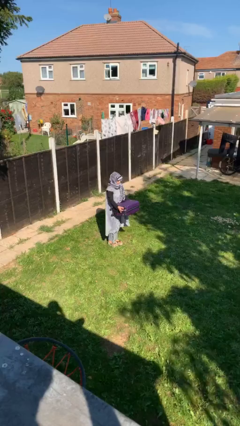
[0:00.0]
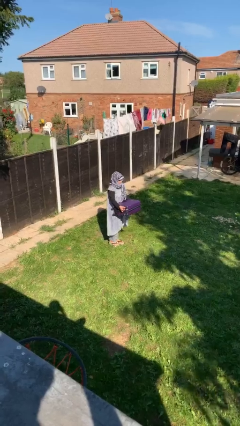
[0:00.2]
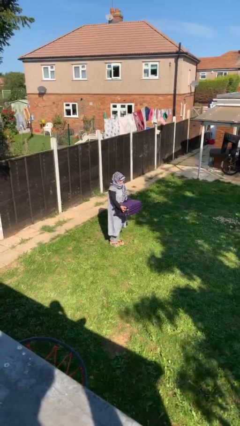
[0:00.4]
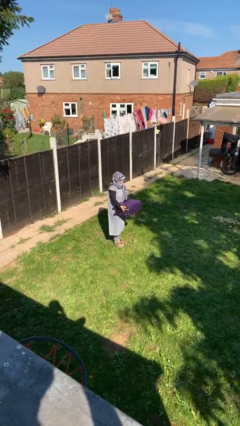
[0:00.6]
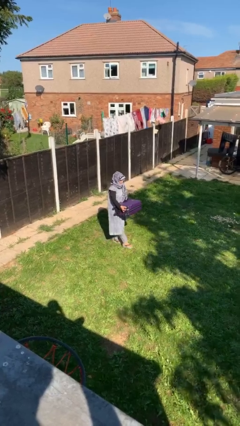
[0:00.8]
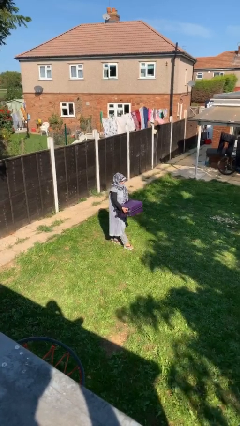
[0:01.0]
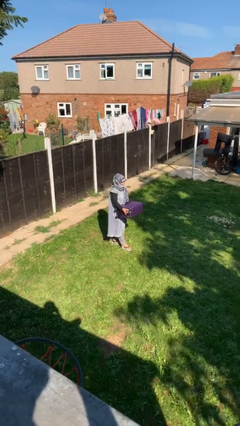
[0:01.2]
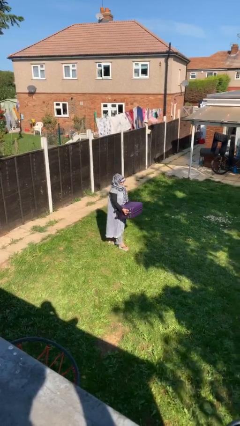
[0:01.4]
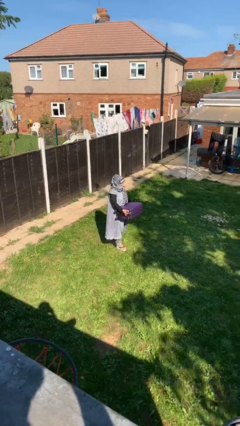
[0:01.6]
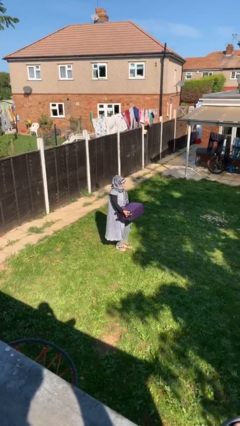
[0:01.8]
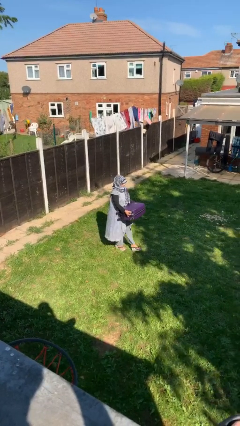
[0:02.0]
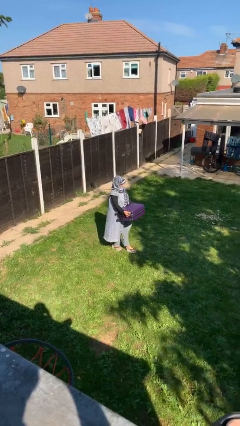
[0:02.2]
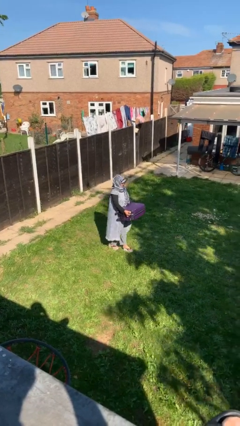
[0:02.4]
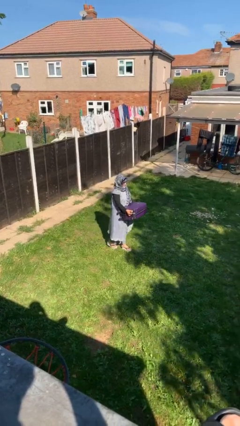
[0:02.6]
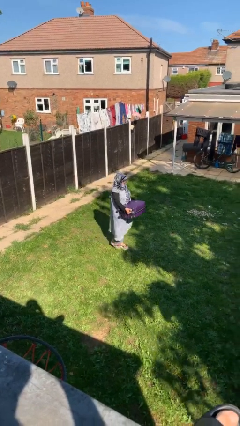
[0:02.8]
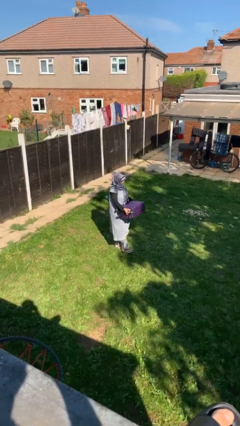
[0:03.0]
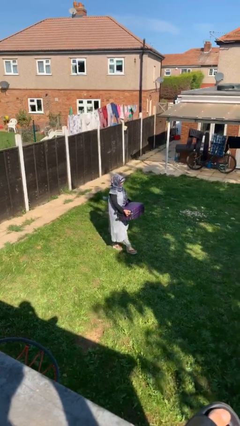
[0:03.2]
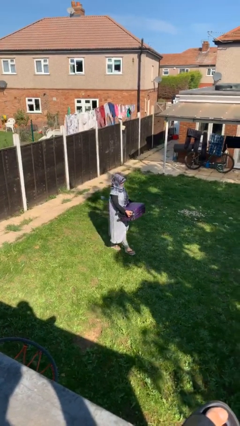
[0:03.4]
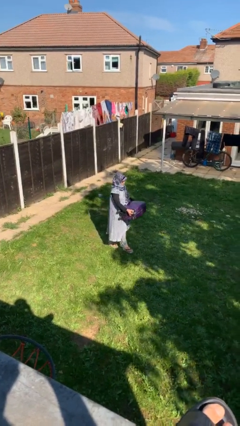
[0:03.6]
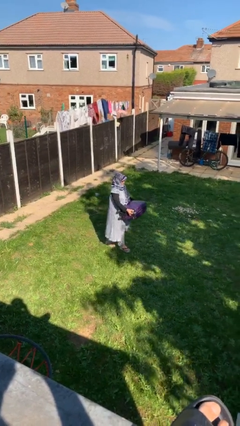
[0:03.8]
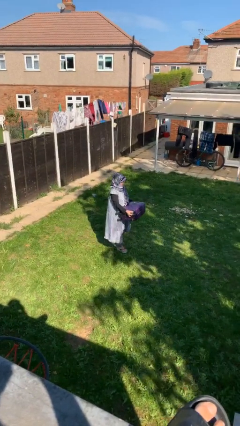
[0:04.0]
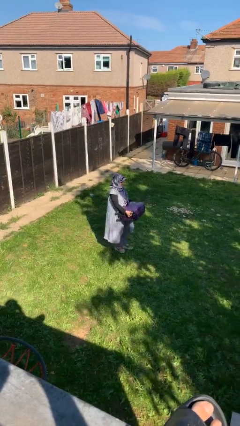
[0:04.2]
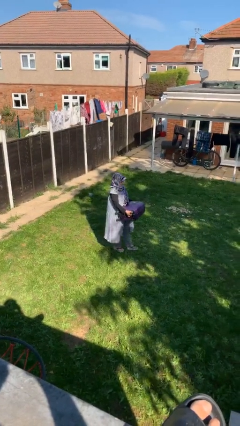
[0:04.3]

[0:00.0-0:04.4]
person carries heavy object

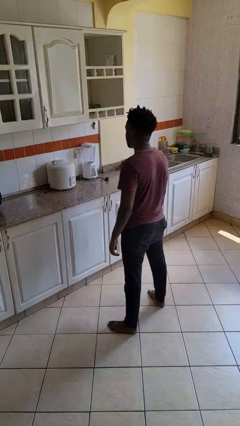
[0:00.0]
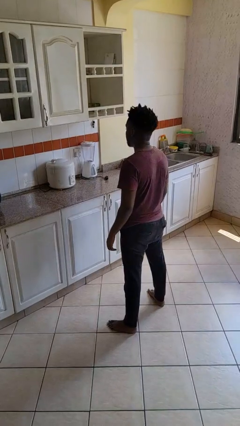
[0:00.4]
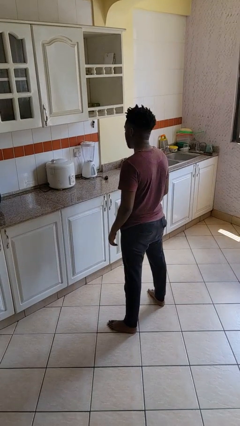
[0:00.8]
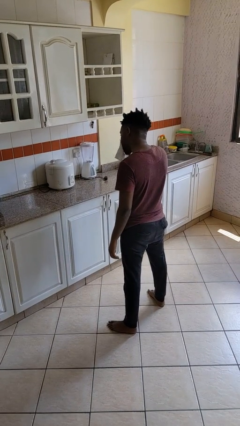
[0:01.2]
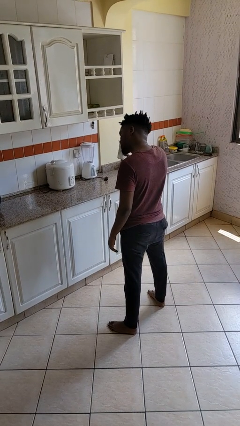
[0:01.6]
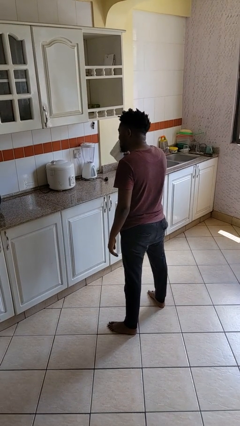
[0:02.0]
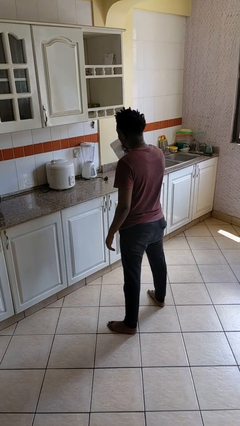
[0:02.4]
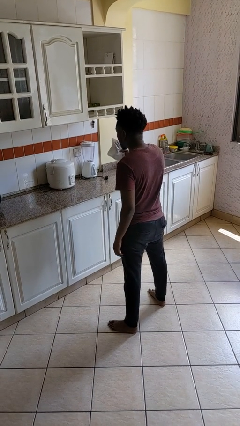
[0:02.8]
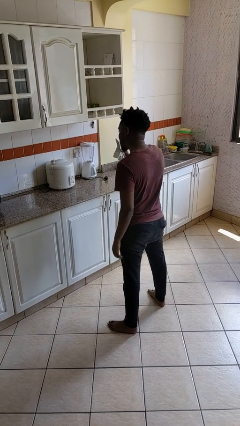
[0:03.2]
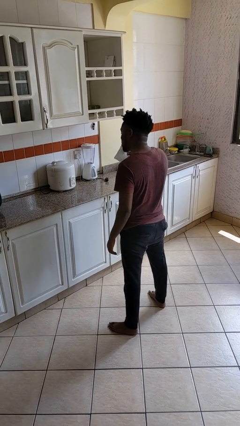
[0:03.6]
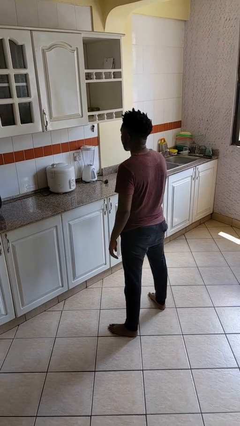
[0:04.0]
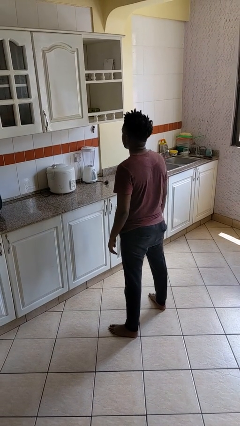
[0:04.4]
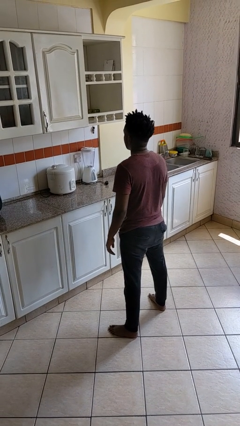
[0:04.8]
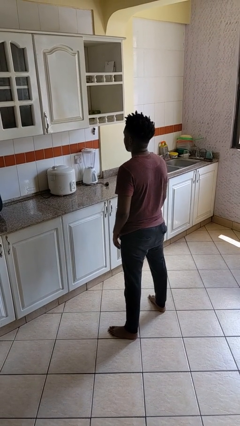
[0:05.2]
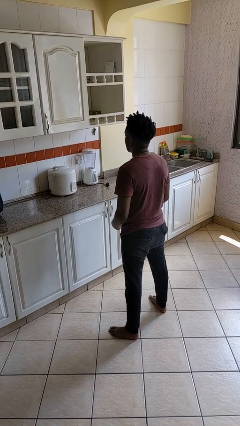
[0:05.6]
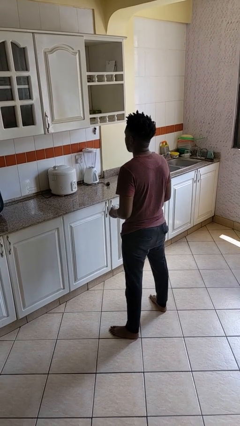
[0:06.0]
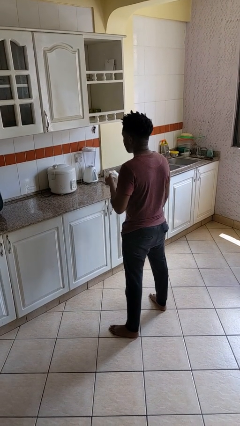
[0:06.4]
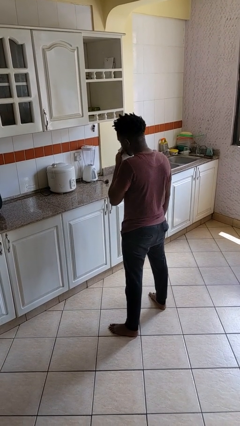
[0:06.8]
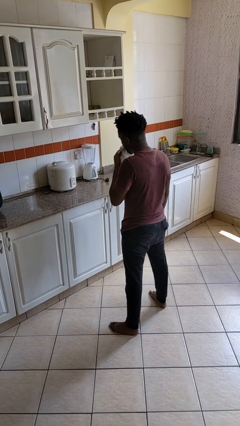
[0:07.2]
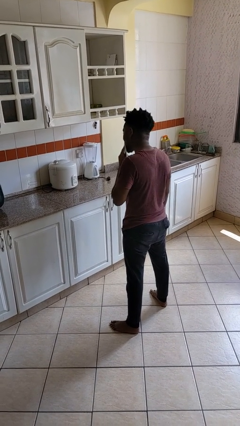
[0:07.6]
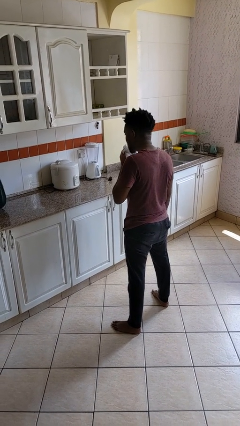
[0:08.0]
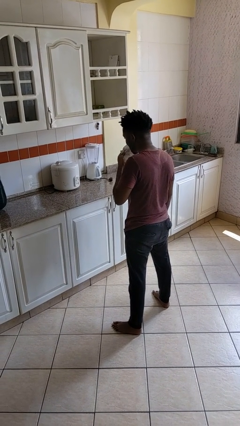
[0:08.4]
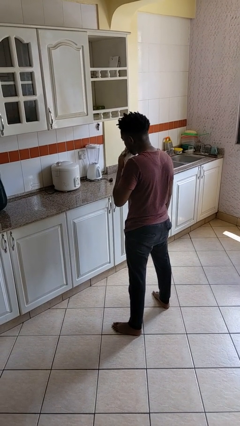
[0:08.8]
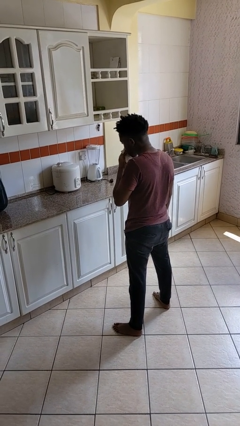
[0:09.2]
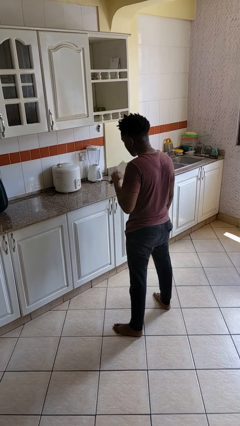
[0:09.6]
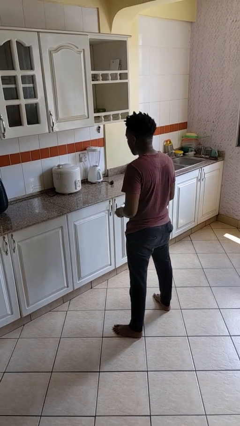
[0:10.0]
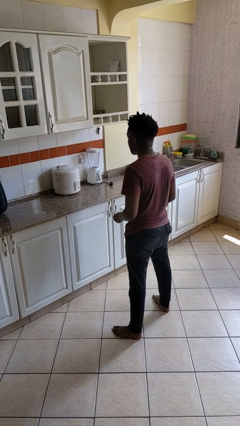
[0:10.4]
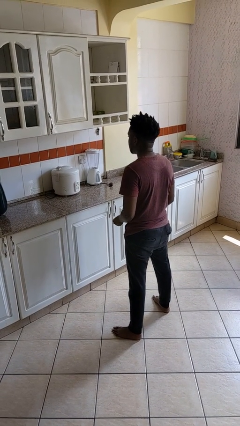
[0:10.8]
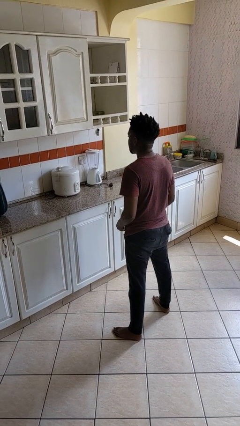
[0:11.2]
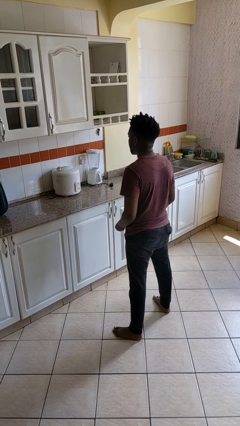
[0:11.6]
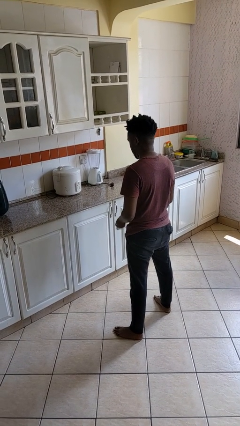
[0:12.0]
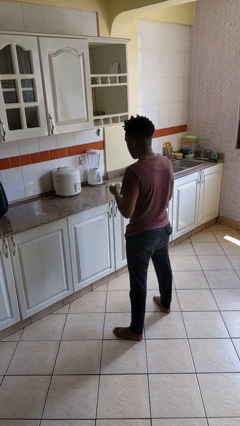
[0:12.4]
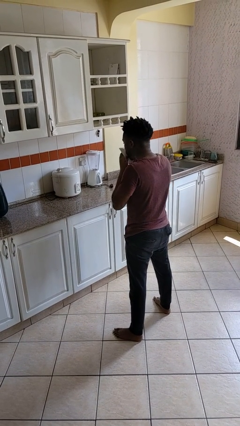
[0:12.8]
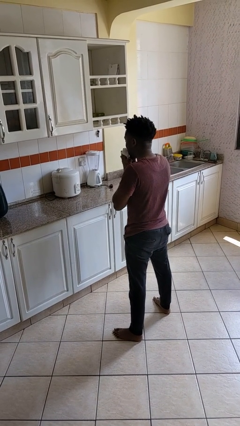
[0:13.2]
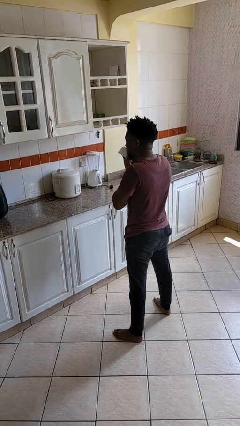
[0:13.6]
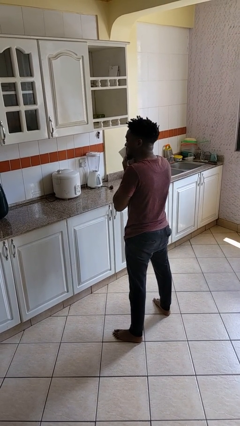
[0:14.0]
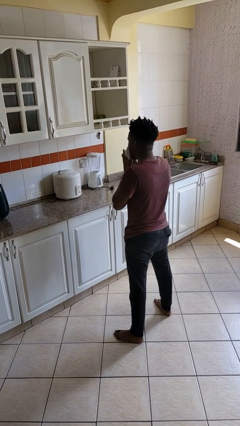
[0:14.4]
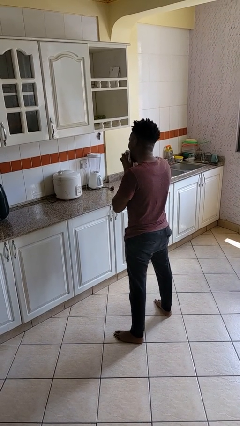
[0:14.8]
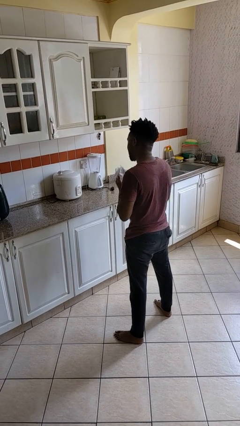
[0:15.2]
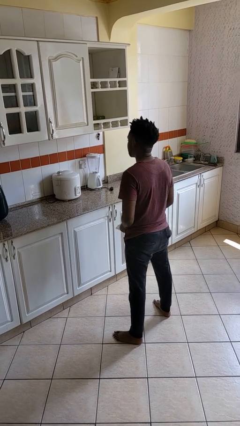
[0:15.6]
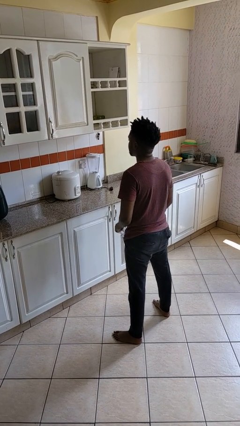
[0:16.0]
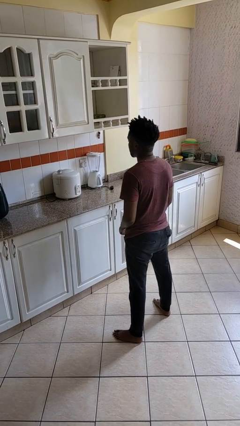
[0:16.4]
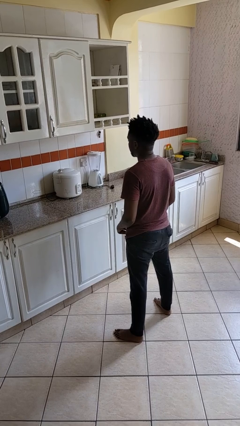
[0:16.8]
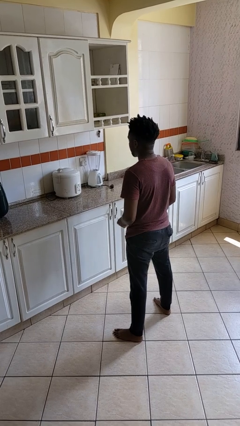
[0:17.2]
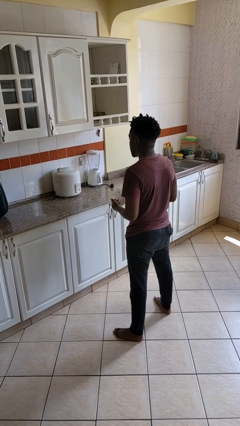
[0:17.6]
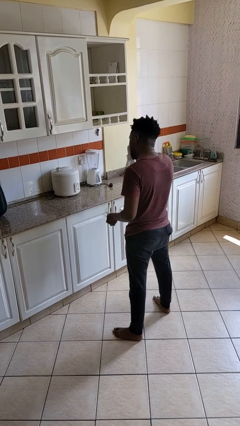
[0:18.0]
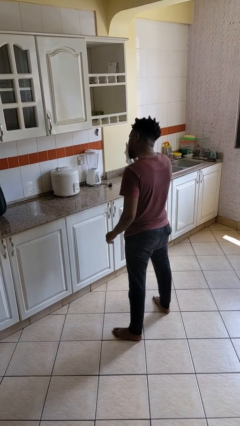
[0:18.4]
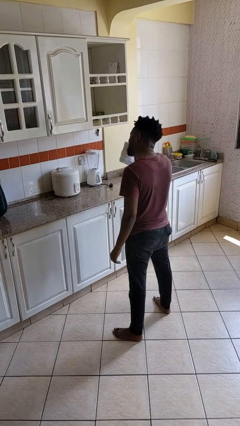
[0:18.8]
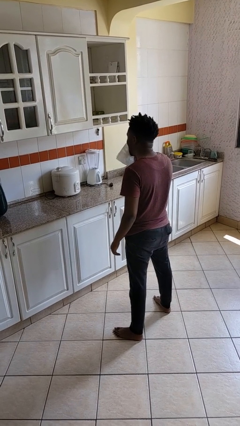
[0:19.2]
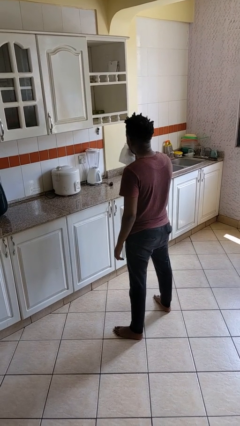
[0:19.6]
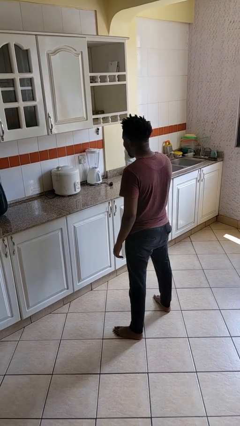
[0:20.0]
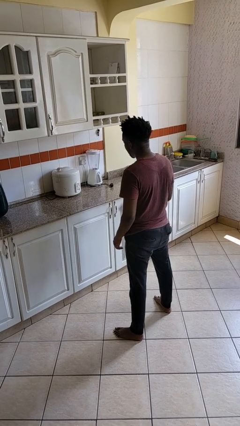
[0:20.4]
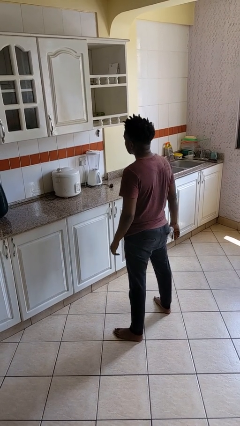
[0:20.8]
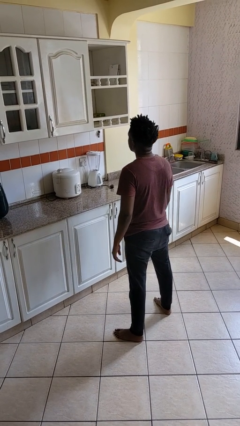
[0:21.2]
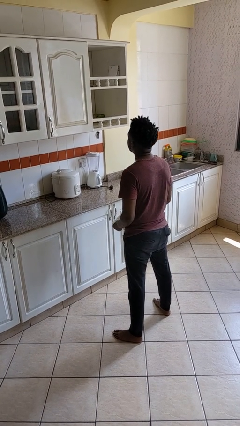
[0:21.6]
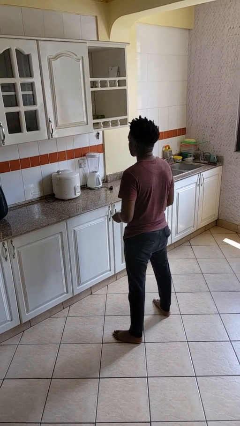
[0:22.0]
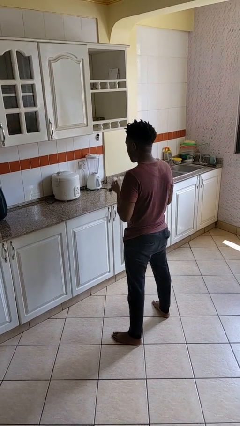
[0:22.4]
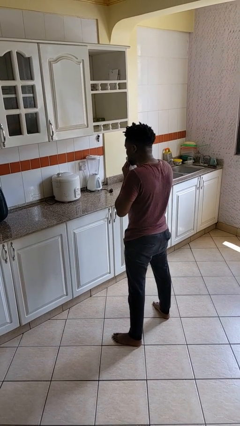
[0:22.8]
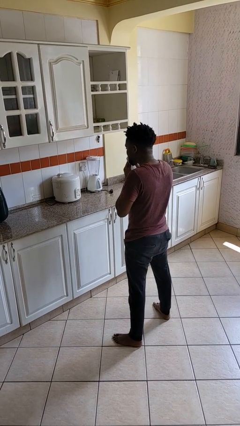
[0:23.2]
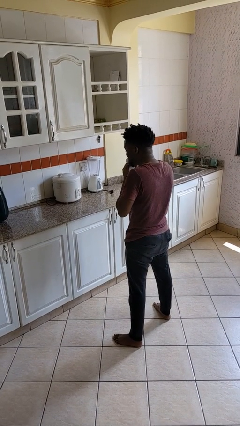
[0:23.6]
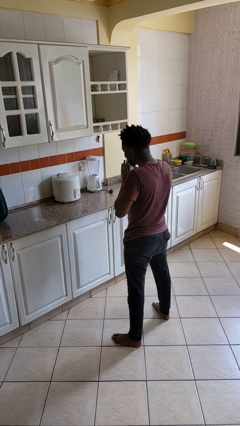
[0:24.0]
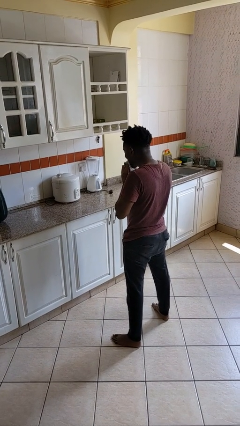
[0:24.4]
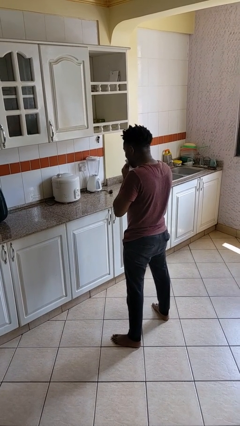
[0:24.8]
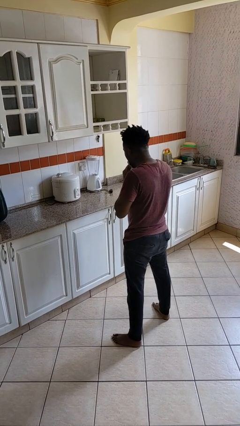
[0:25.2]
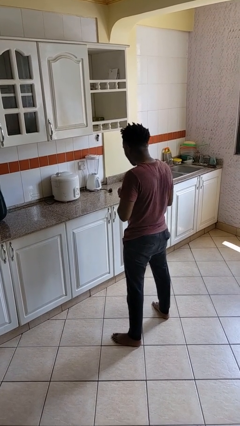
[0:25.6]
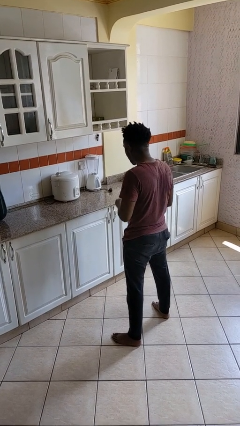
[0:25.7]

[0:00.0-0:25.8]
person wipes mouth with napkin

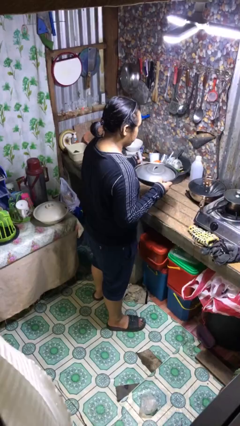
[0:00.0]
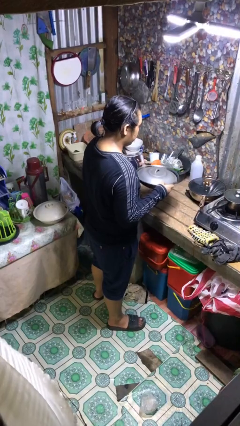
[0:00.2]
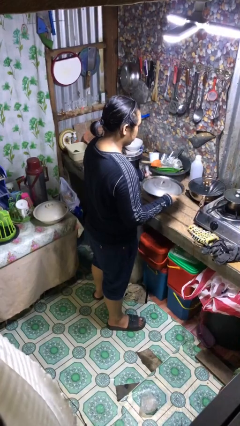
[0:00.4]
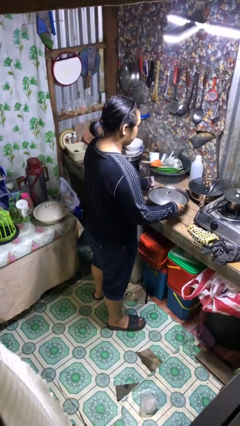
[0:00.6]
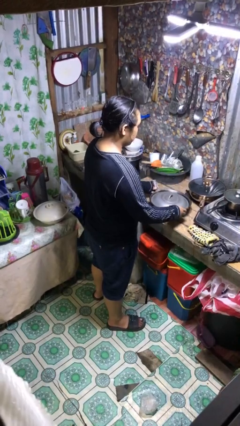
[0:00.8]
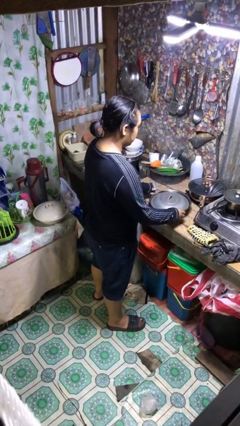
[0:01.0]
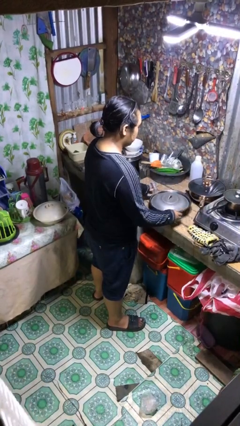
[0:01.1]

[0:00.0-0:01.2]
person puts down object on countertop
